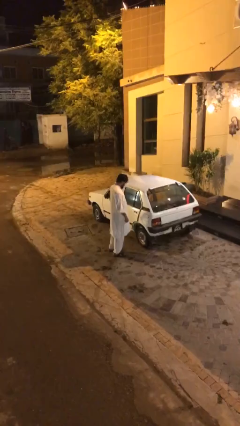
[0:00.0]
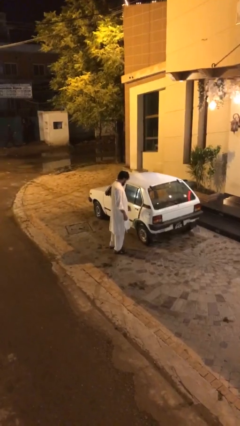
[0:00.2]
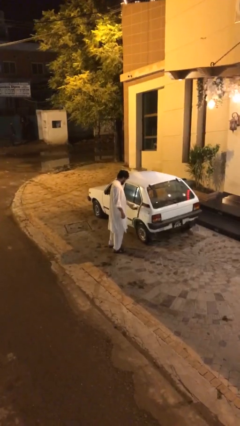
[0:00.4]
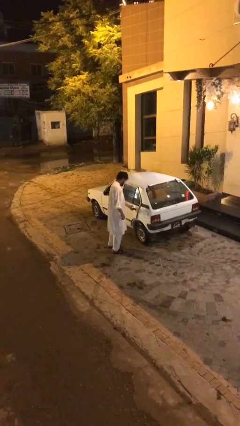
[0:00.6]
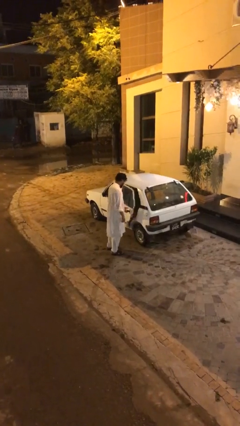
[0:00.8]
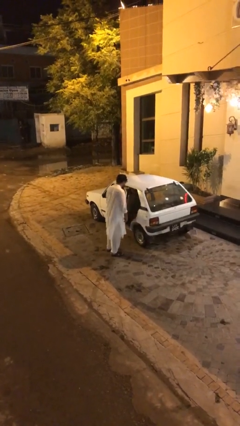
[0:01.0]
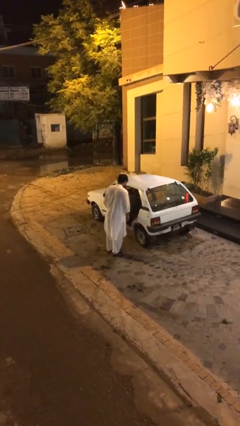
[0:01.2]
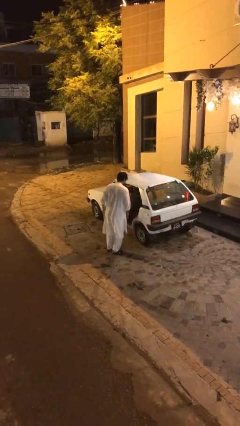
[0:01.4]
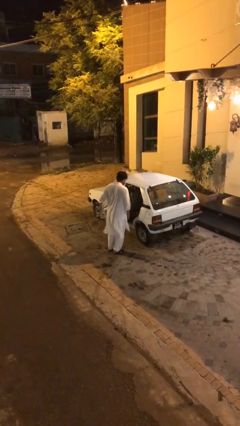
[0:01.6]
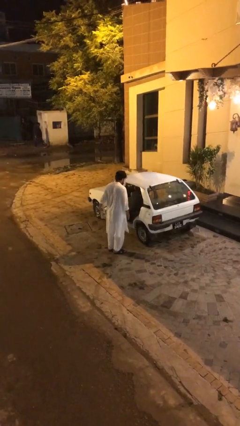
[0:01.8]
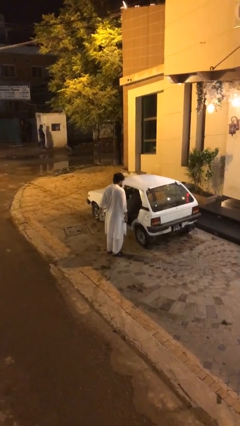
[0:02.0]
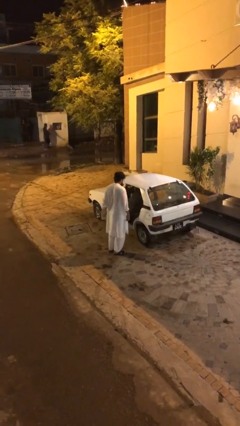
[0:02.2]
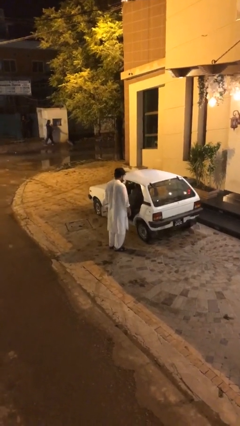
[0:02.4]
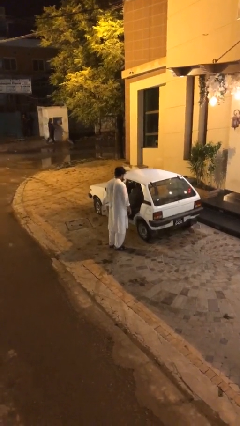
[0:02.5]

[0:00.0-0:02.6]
person opens car door

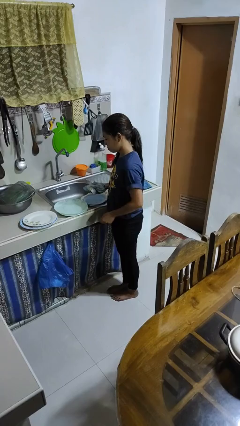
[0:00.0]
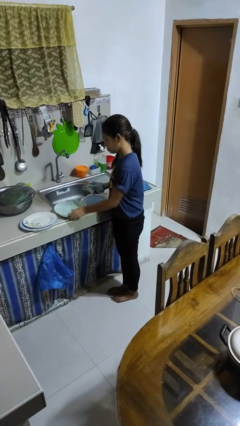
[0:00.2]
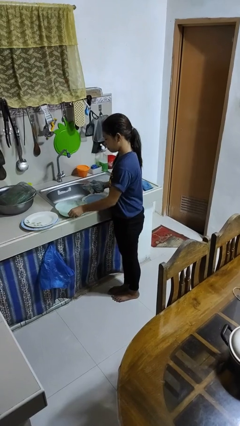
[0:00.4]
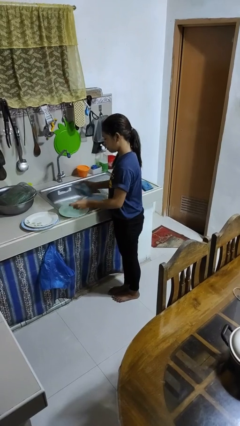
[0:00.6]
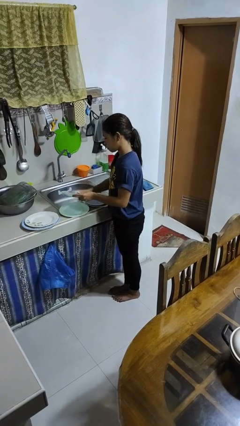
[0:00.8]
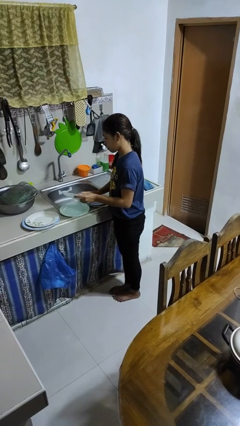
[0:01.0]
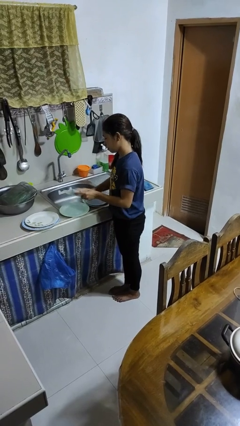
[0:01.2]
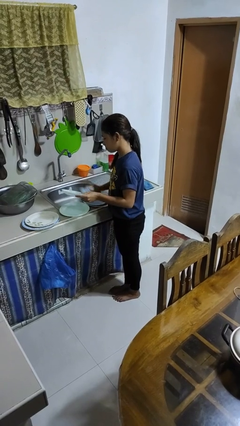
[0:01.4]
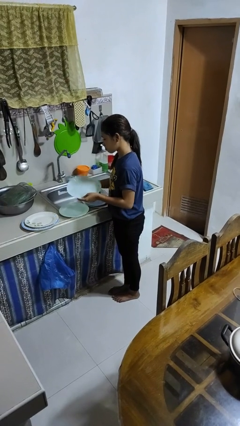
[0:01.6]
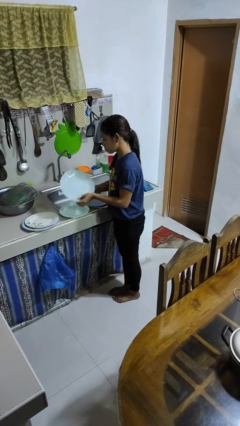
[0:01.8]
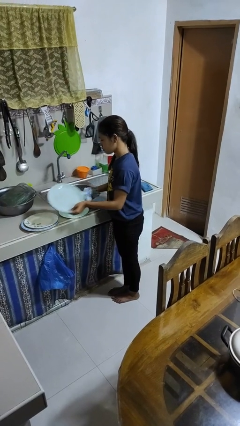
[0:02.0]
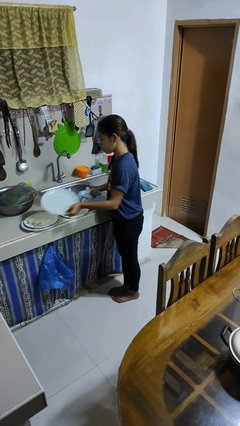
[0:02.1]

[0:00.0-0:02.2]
person dries dish

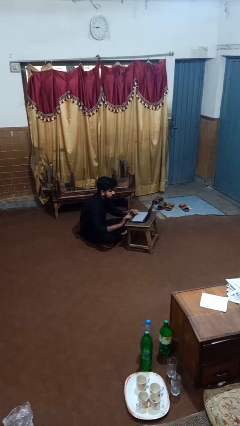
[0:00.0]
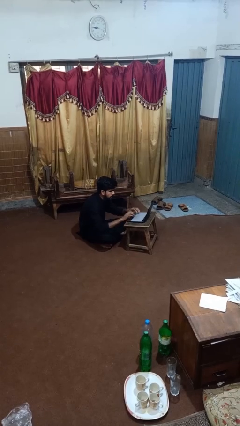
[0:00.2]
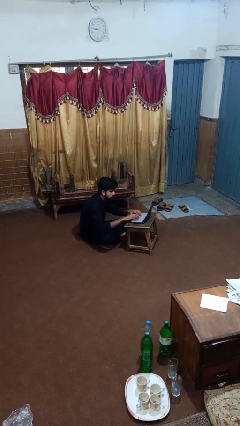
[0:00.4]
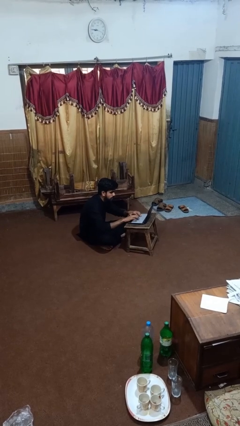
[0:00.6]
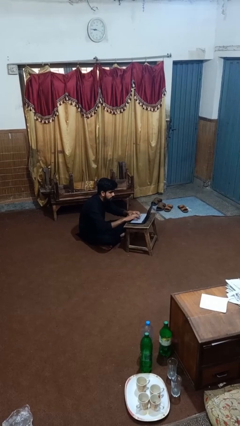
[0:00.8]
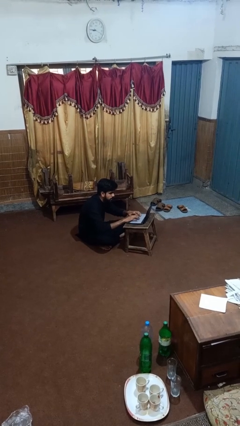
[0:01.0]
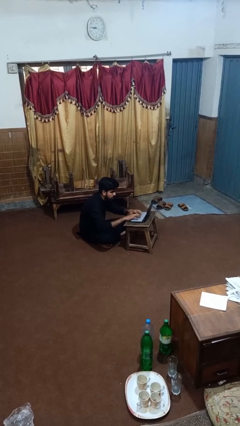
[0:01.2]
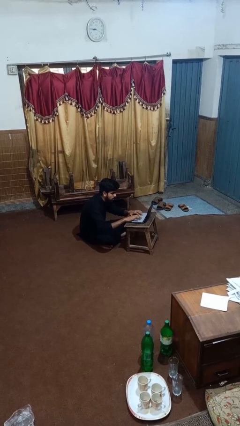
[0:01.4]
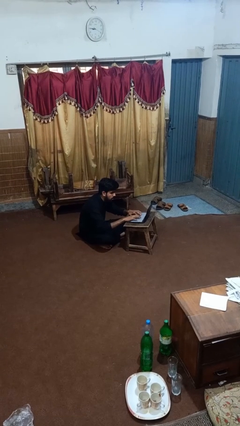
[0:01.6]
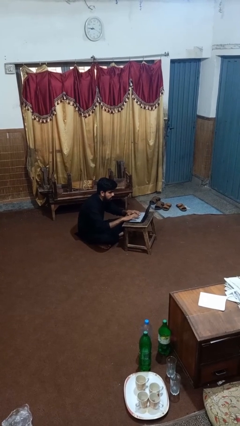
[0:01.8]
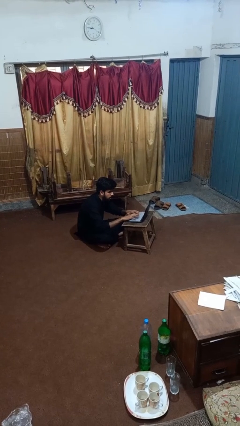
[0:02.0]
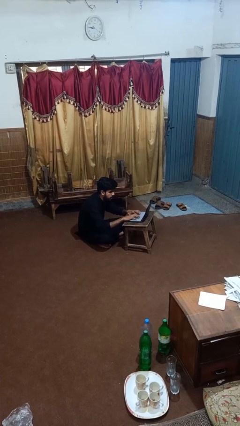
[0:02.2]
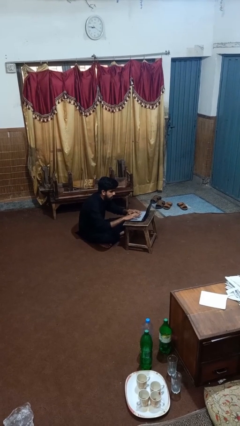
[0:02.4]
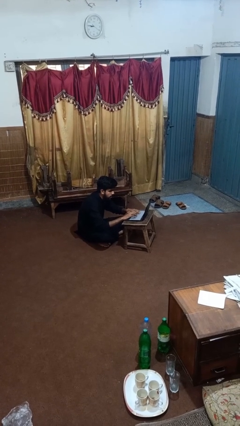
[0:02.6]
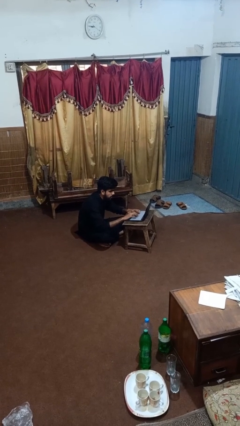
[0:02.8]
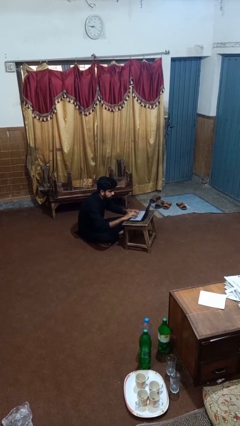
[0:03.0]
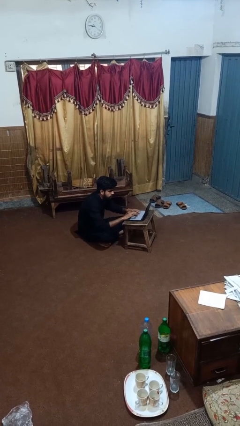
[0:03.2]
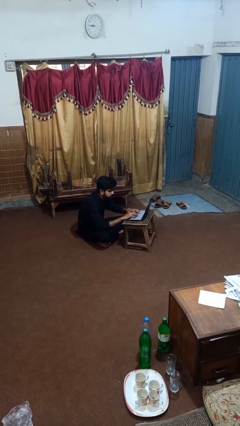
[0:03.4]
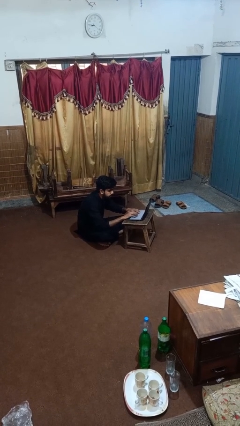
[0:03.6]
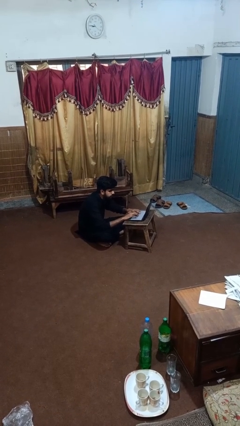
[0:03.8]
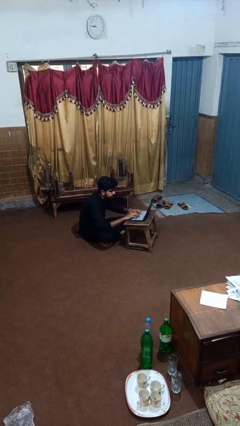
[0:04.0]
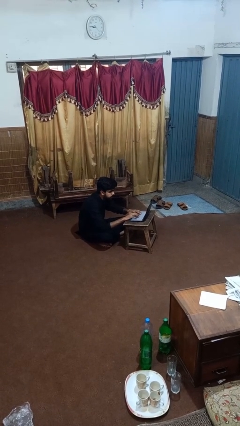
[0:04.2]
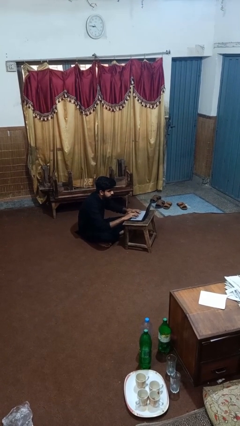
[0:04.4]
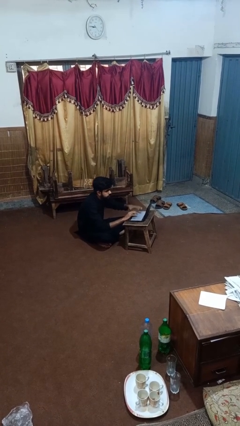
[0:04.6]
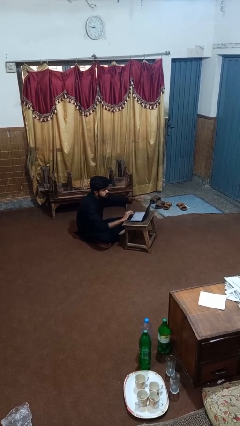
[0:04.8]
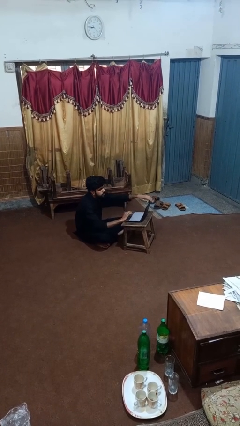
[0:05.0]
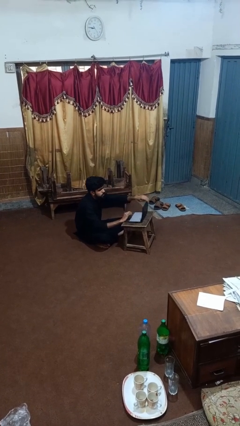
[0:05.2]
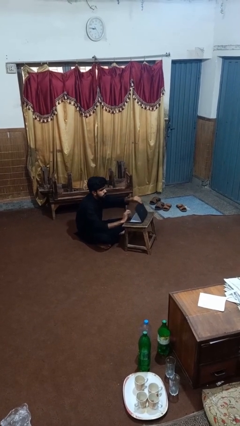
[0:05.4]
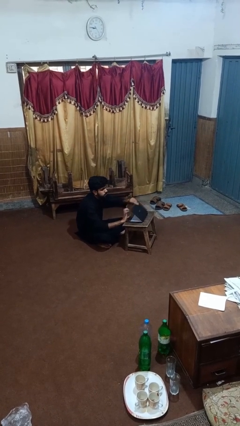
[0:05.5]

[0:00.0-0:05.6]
person interacts with laptop

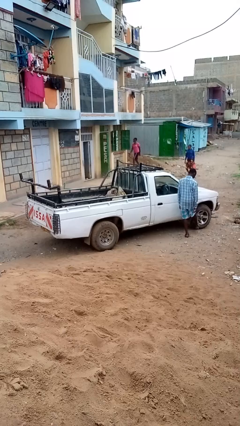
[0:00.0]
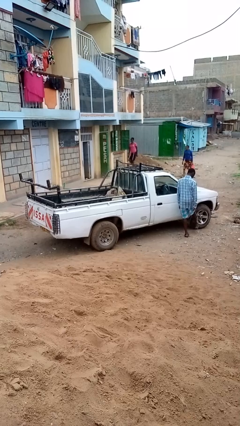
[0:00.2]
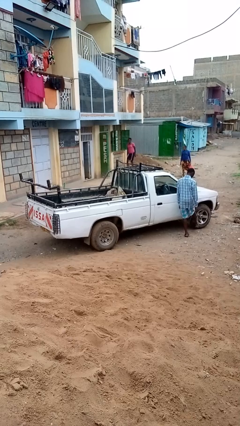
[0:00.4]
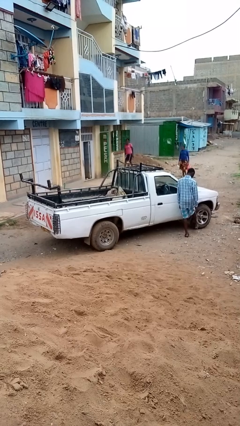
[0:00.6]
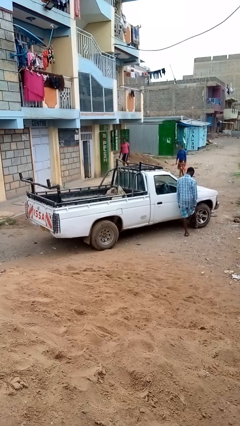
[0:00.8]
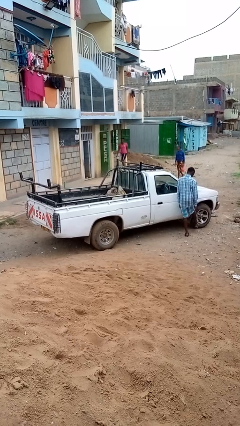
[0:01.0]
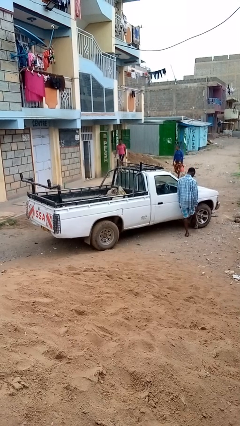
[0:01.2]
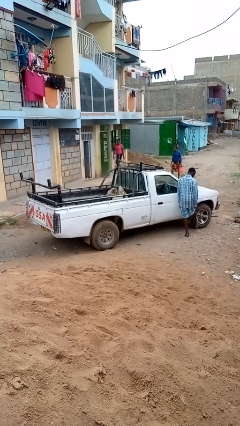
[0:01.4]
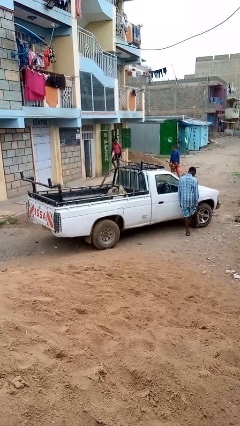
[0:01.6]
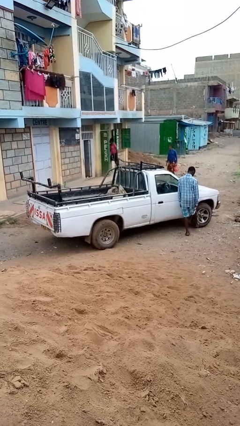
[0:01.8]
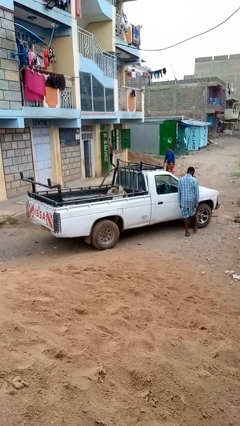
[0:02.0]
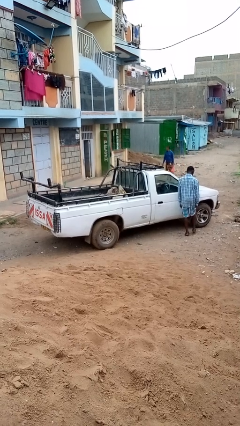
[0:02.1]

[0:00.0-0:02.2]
person kicks car tires

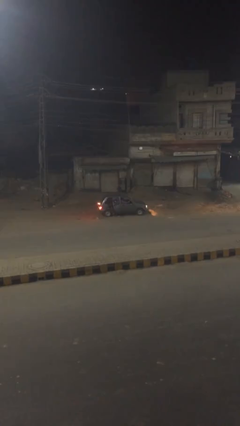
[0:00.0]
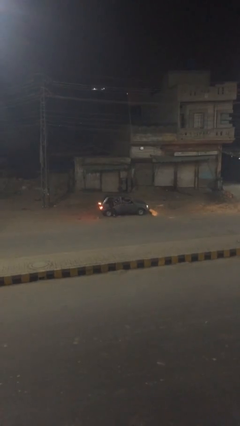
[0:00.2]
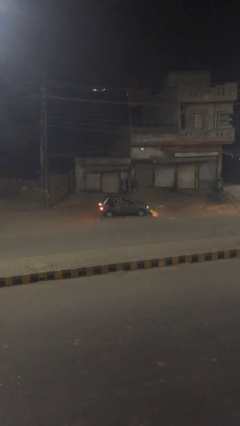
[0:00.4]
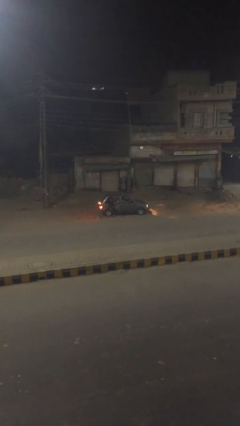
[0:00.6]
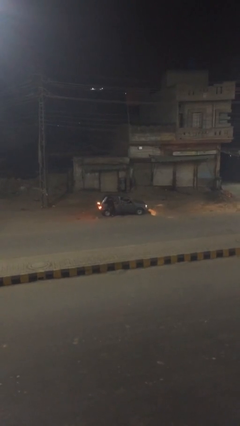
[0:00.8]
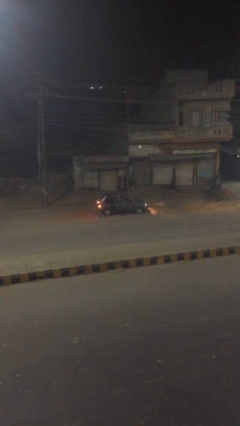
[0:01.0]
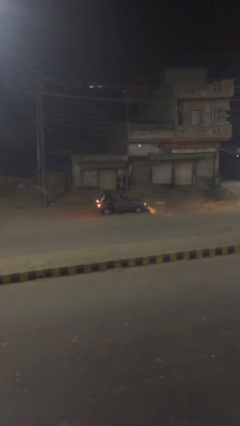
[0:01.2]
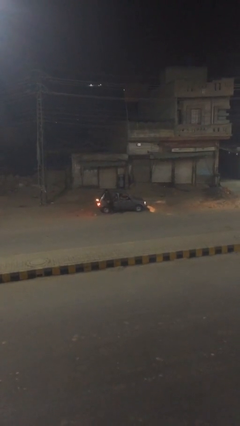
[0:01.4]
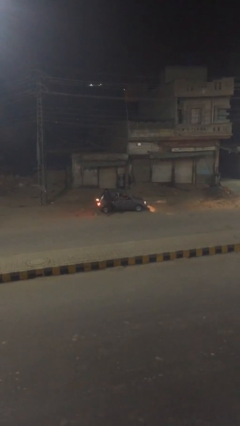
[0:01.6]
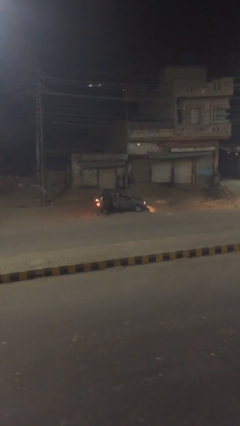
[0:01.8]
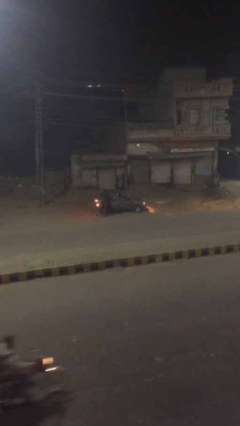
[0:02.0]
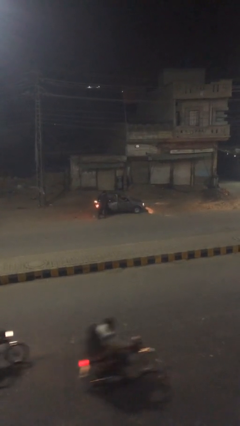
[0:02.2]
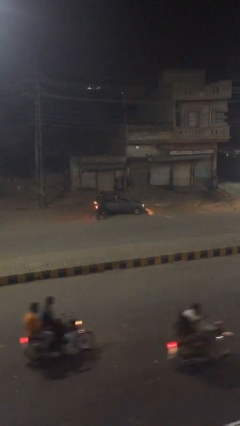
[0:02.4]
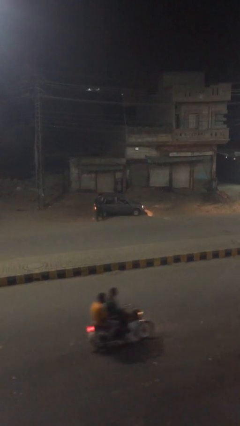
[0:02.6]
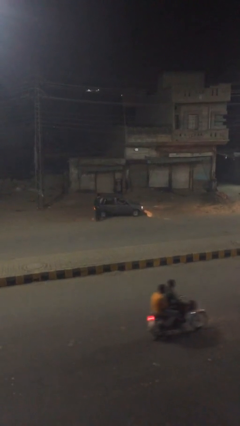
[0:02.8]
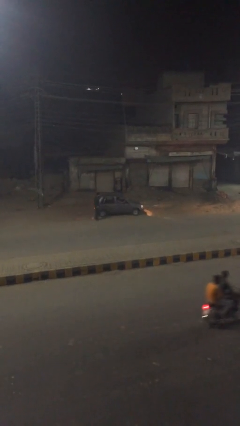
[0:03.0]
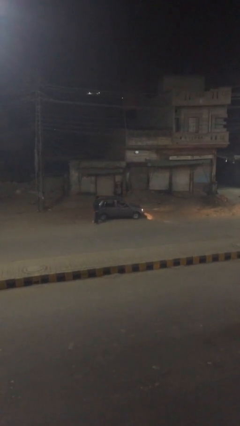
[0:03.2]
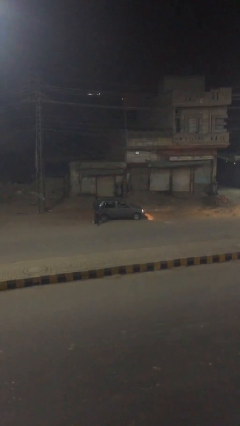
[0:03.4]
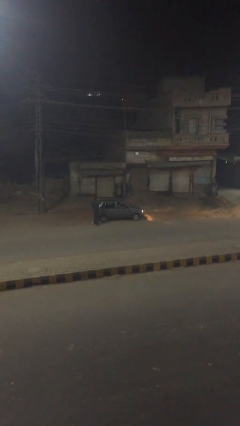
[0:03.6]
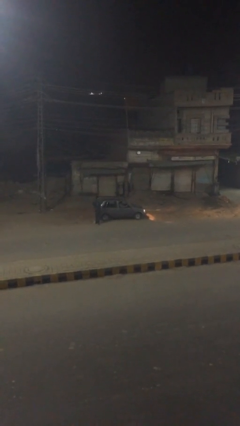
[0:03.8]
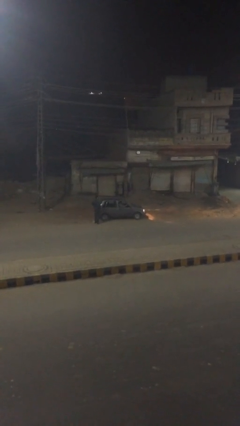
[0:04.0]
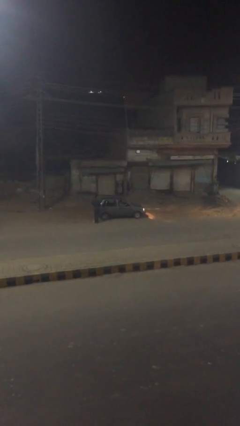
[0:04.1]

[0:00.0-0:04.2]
car drops off person

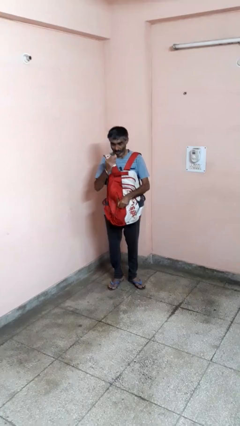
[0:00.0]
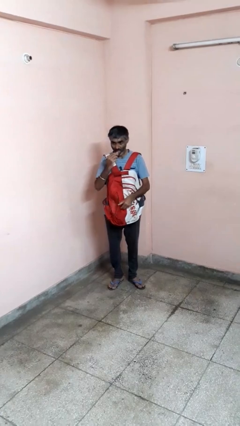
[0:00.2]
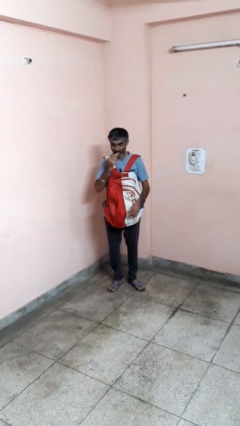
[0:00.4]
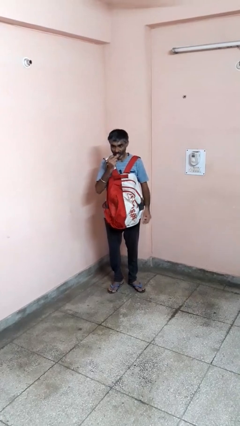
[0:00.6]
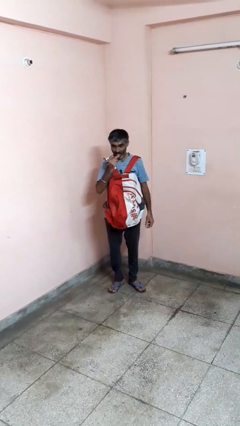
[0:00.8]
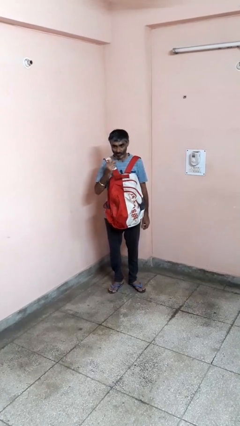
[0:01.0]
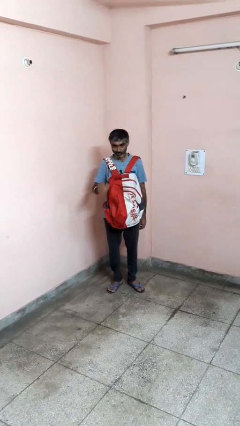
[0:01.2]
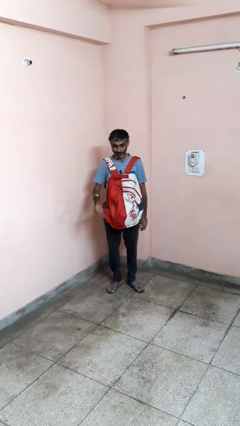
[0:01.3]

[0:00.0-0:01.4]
person eats snack from bag
